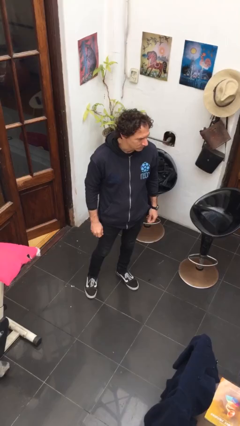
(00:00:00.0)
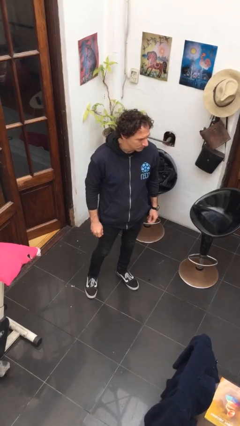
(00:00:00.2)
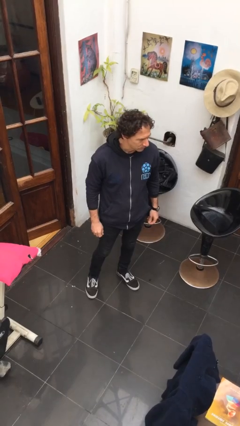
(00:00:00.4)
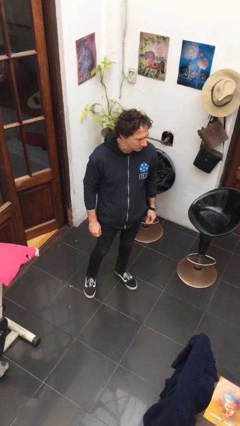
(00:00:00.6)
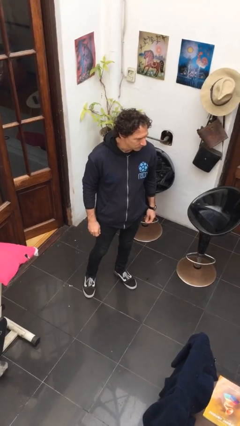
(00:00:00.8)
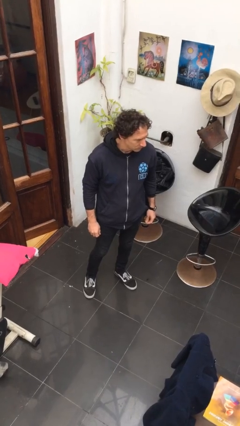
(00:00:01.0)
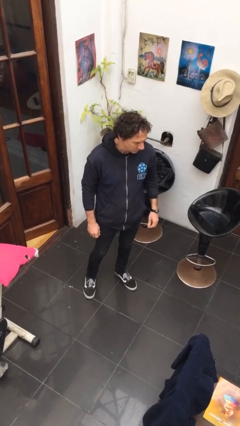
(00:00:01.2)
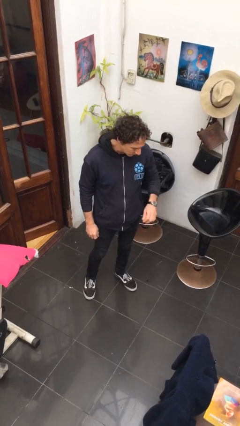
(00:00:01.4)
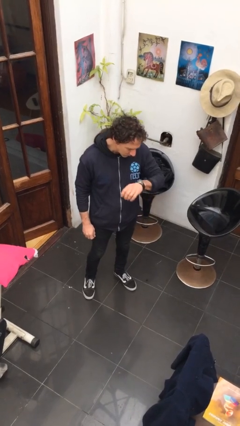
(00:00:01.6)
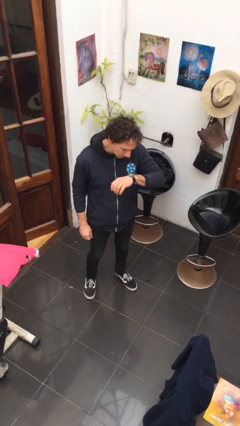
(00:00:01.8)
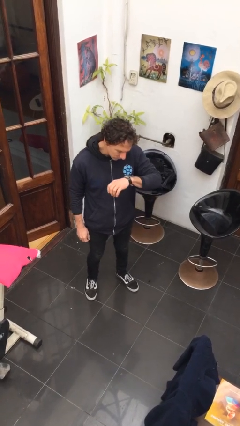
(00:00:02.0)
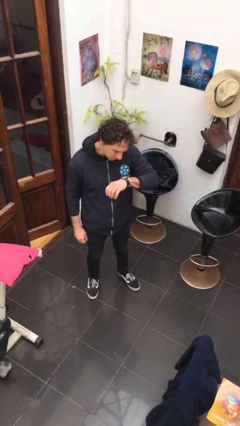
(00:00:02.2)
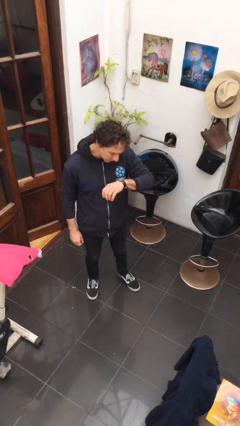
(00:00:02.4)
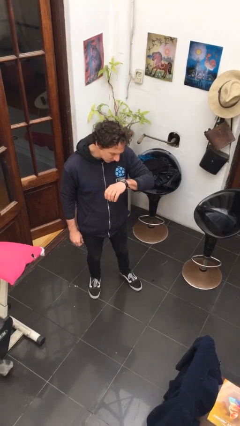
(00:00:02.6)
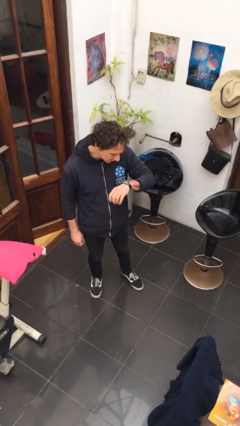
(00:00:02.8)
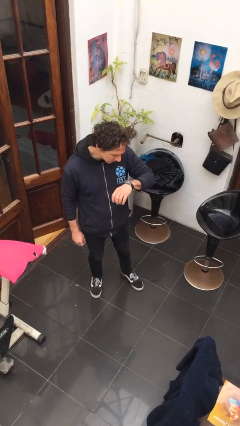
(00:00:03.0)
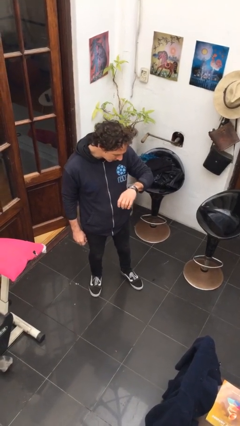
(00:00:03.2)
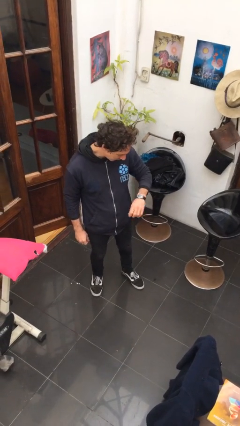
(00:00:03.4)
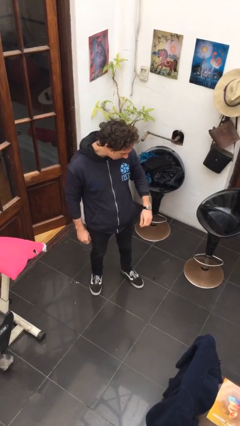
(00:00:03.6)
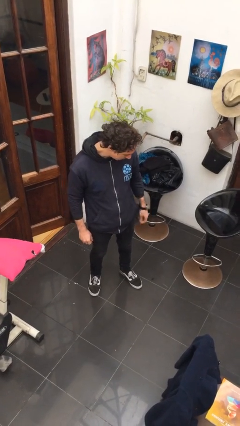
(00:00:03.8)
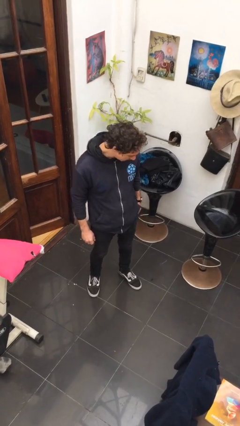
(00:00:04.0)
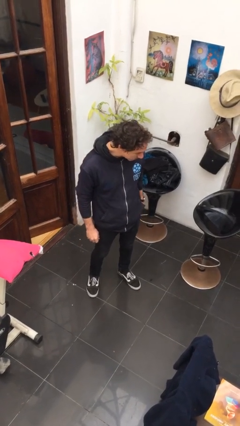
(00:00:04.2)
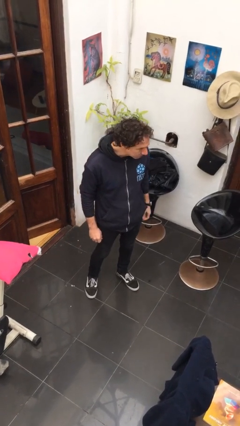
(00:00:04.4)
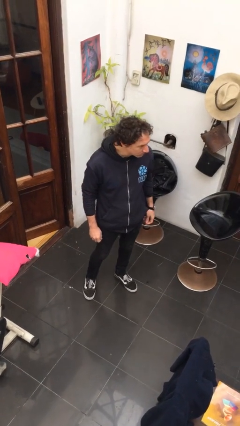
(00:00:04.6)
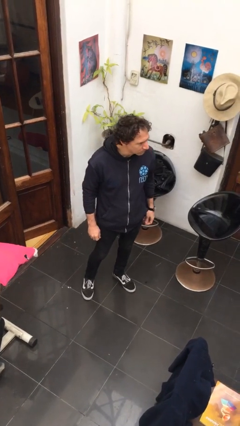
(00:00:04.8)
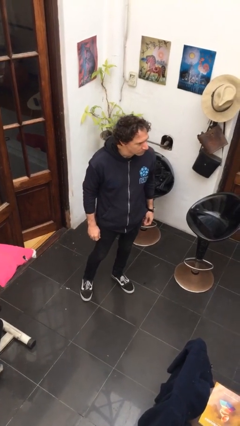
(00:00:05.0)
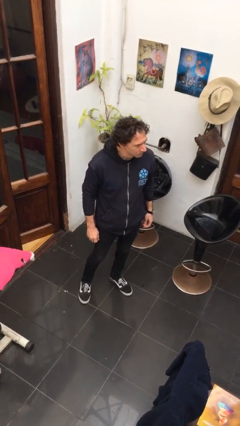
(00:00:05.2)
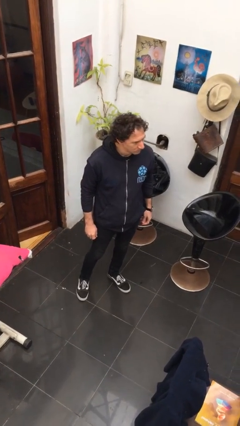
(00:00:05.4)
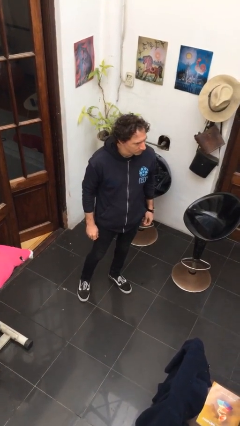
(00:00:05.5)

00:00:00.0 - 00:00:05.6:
person looks at wristwatch

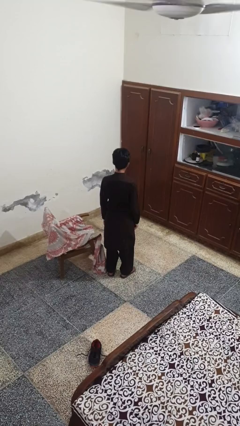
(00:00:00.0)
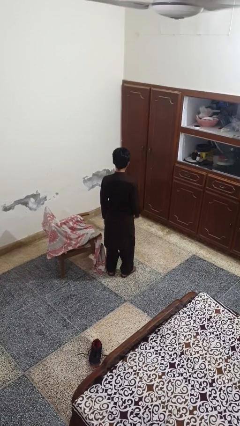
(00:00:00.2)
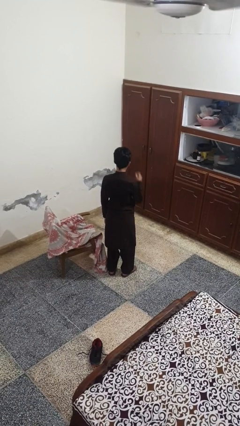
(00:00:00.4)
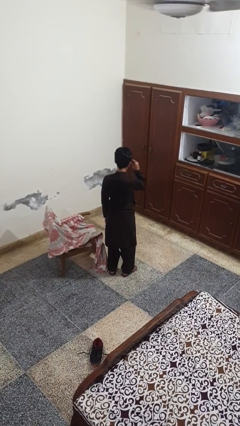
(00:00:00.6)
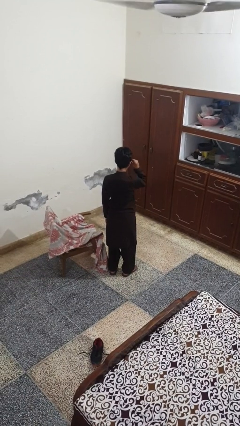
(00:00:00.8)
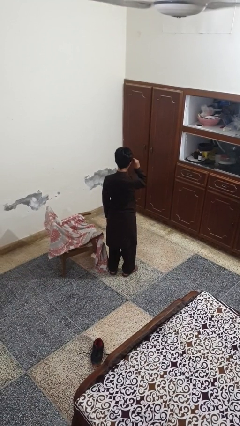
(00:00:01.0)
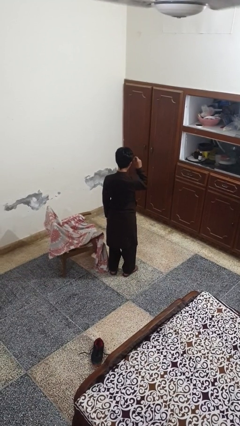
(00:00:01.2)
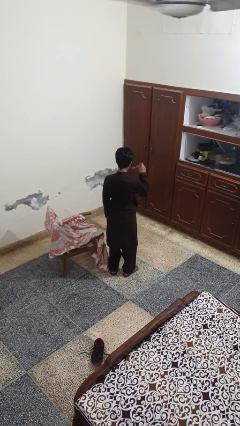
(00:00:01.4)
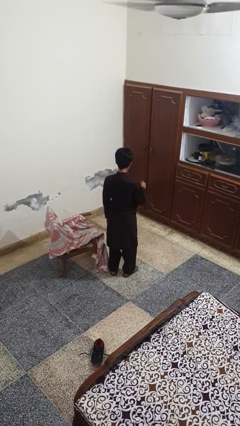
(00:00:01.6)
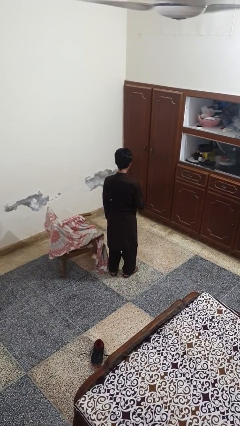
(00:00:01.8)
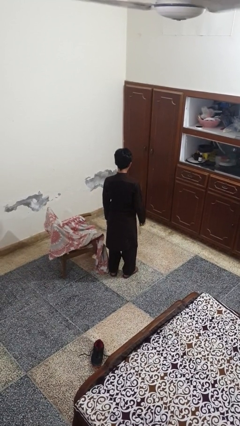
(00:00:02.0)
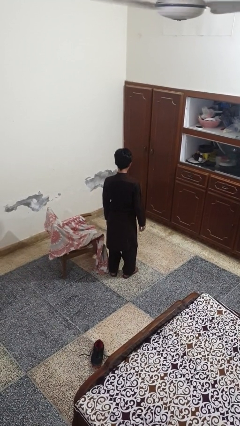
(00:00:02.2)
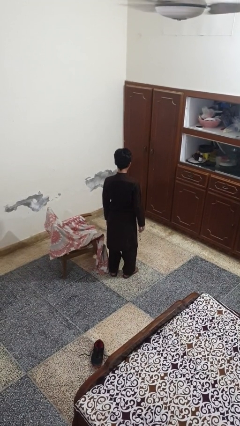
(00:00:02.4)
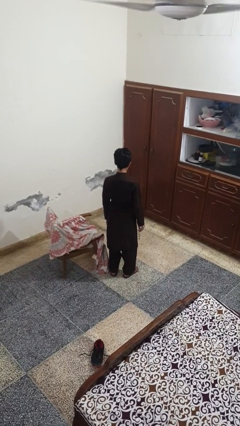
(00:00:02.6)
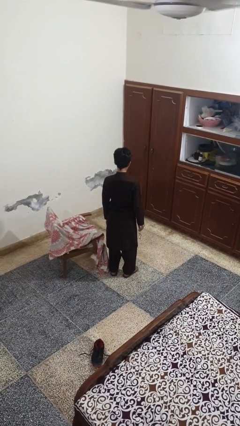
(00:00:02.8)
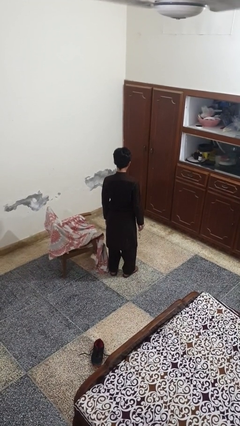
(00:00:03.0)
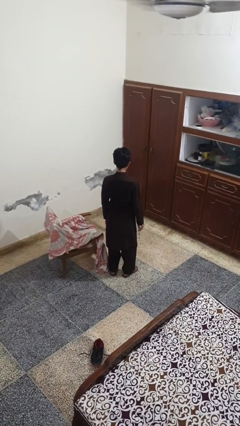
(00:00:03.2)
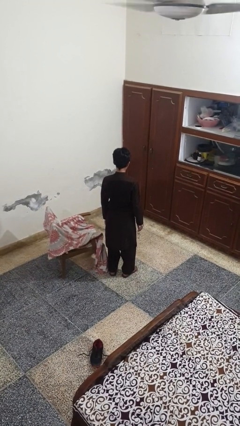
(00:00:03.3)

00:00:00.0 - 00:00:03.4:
person takes off glasses

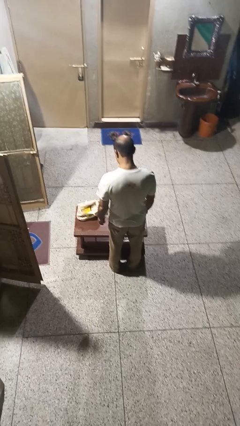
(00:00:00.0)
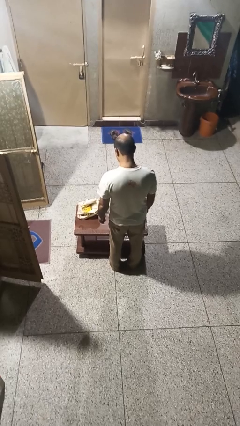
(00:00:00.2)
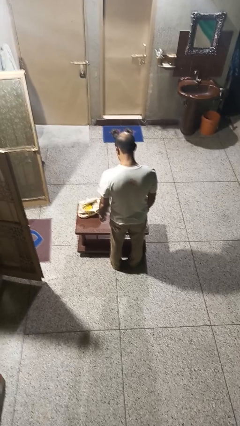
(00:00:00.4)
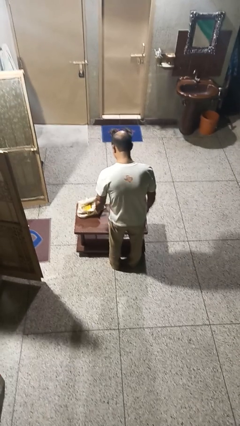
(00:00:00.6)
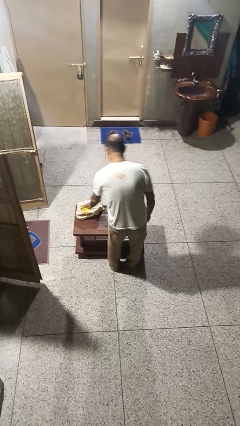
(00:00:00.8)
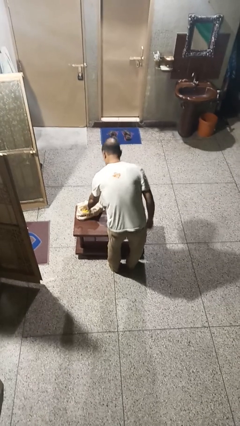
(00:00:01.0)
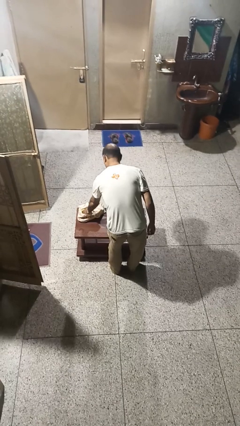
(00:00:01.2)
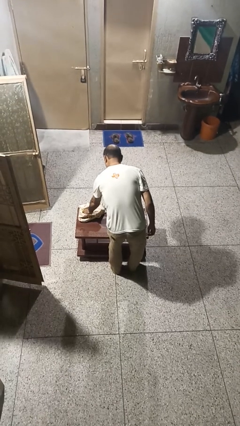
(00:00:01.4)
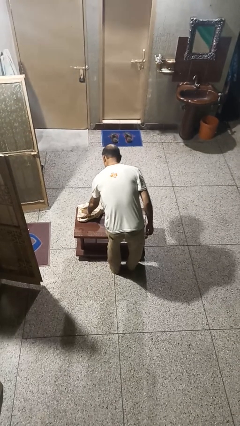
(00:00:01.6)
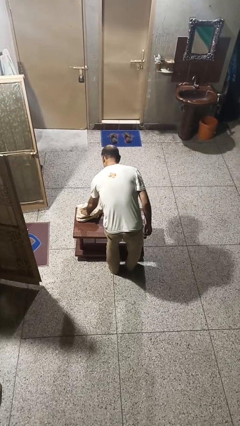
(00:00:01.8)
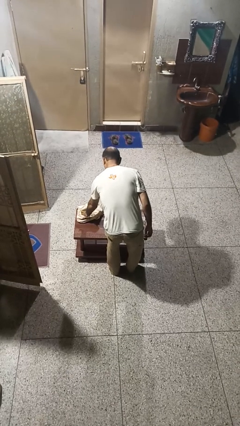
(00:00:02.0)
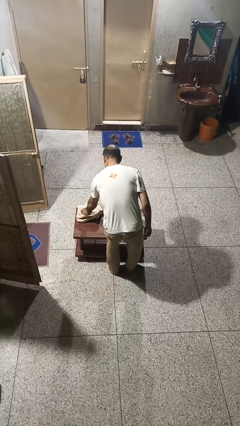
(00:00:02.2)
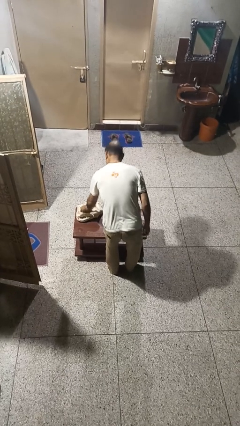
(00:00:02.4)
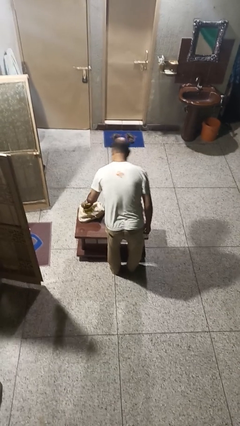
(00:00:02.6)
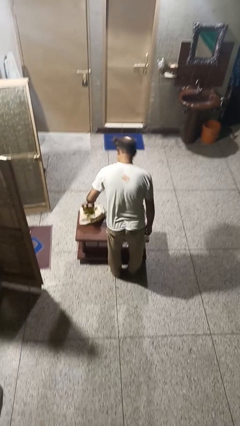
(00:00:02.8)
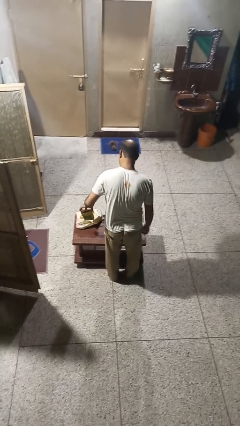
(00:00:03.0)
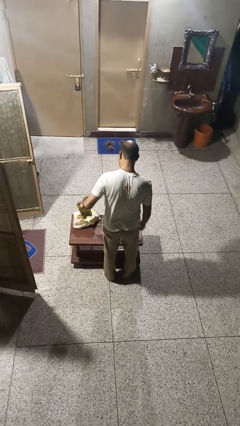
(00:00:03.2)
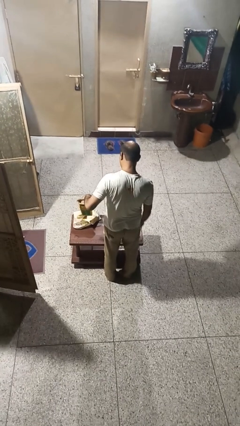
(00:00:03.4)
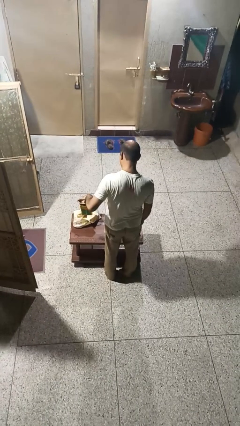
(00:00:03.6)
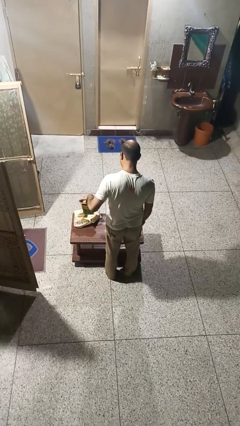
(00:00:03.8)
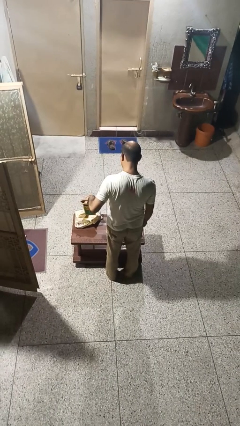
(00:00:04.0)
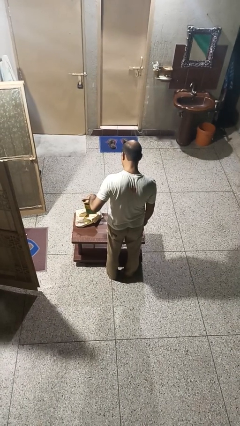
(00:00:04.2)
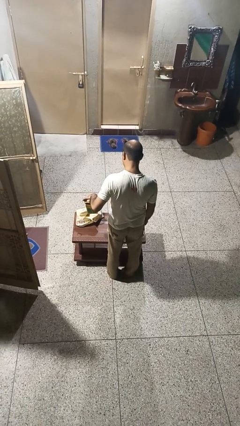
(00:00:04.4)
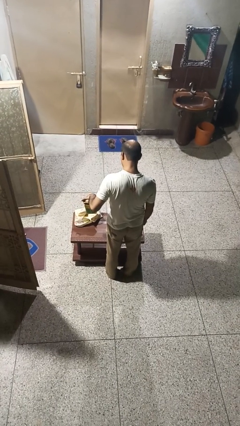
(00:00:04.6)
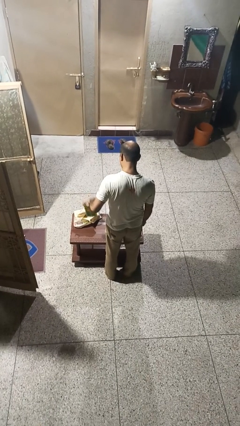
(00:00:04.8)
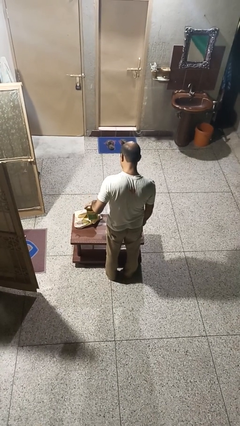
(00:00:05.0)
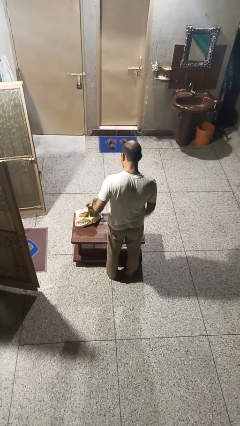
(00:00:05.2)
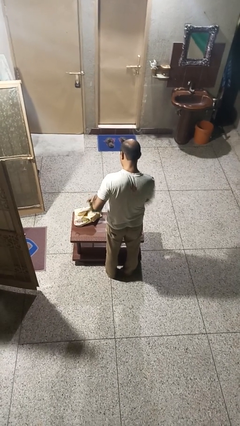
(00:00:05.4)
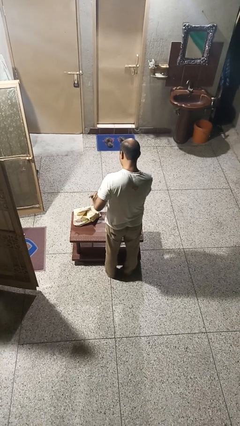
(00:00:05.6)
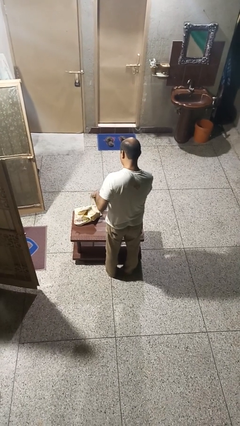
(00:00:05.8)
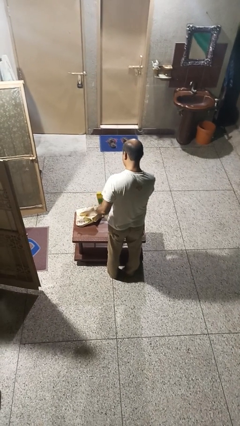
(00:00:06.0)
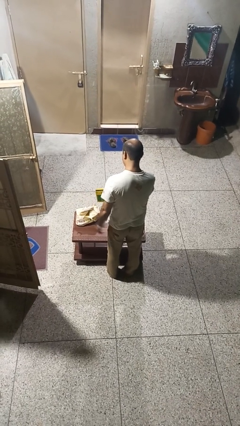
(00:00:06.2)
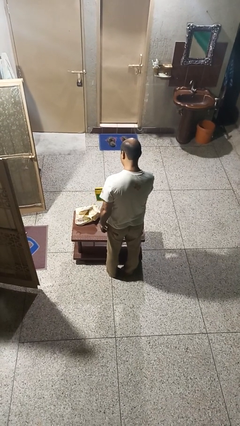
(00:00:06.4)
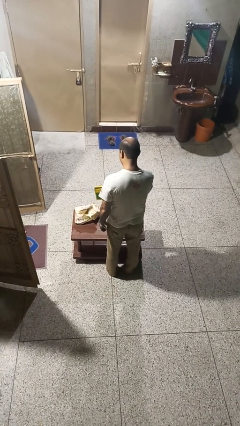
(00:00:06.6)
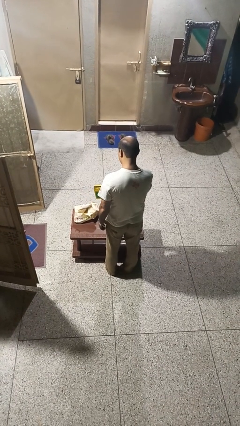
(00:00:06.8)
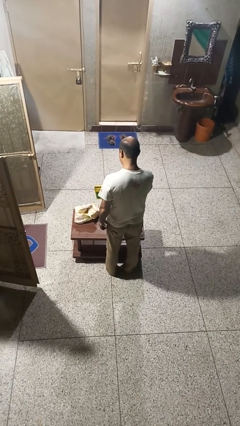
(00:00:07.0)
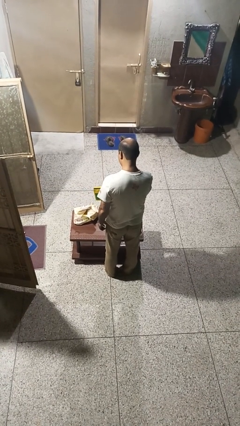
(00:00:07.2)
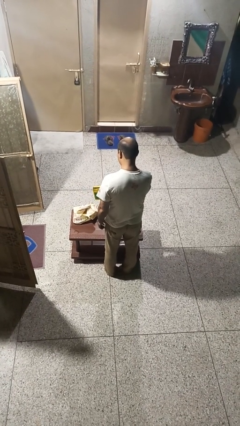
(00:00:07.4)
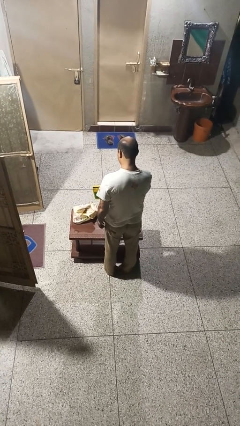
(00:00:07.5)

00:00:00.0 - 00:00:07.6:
person takes object from bag

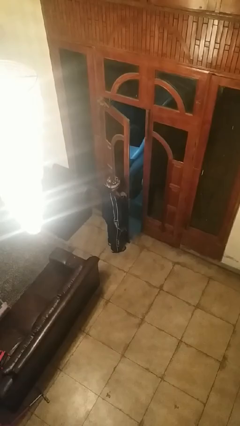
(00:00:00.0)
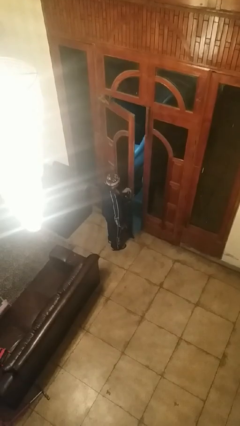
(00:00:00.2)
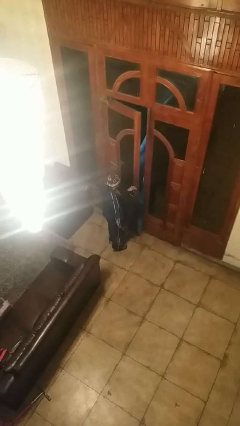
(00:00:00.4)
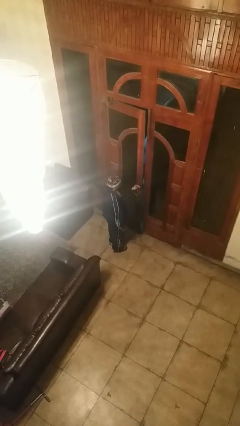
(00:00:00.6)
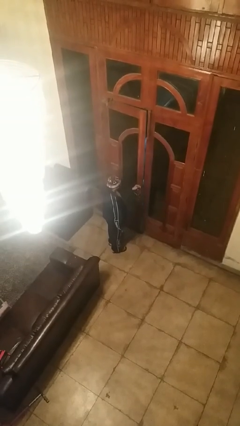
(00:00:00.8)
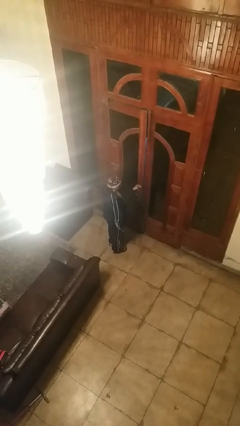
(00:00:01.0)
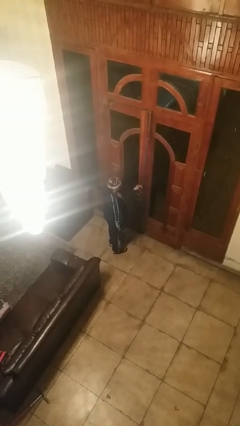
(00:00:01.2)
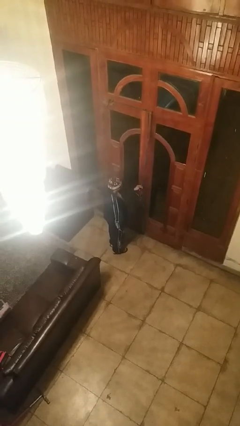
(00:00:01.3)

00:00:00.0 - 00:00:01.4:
person closes facility door
